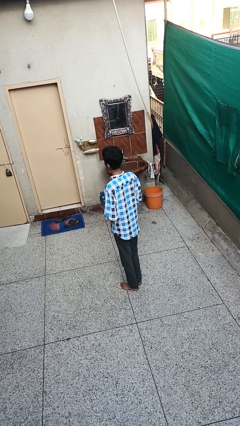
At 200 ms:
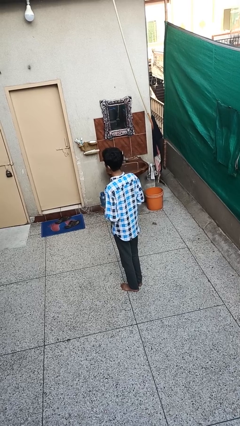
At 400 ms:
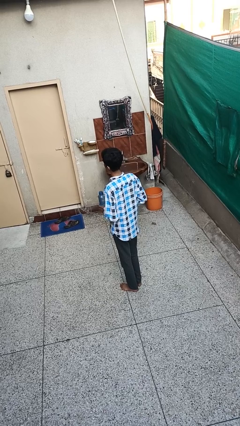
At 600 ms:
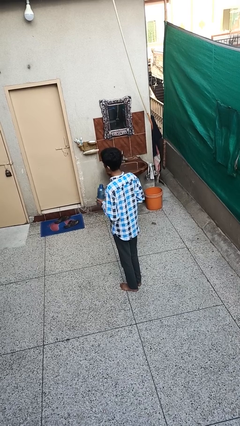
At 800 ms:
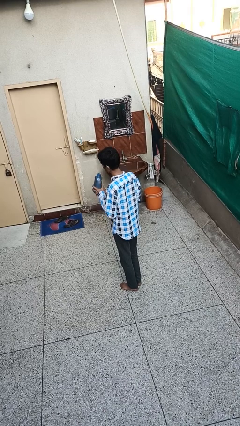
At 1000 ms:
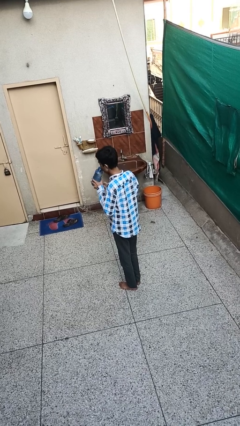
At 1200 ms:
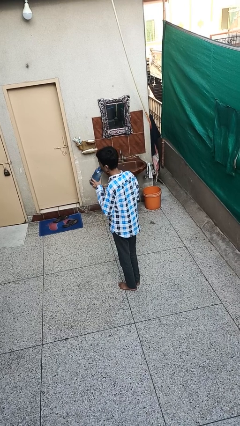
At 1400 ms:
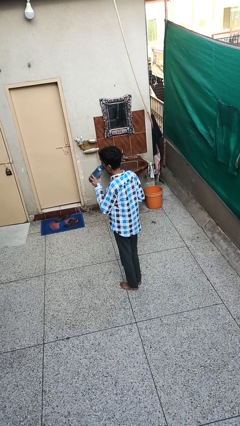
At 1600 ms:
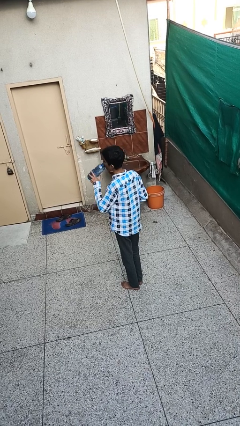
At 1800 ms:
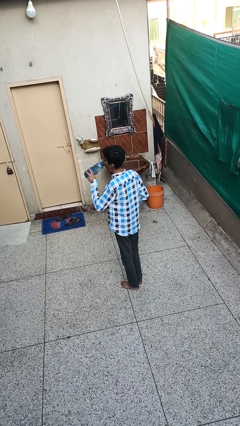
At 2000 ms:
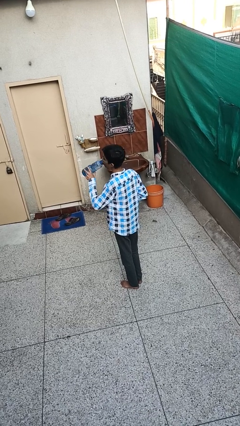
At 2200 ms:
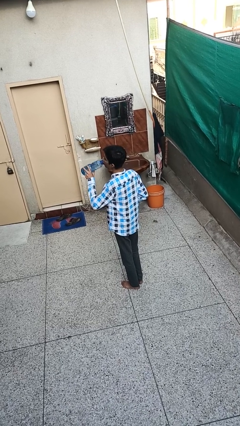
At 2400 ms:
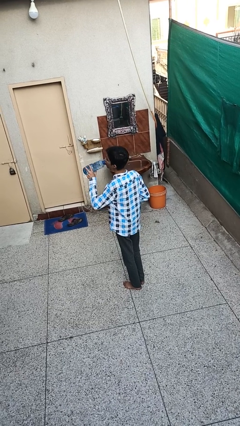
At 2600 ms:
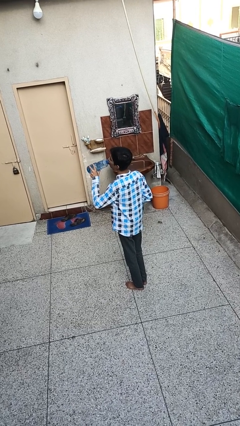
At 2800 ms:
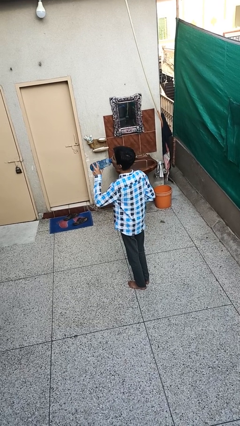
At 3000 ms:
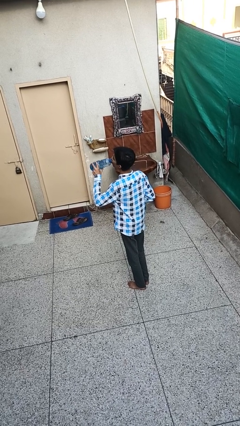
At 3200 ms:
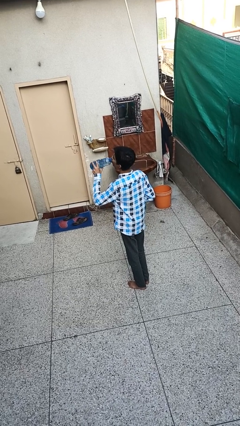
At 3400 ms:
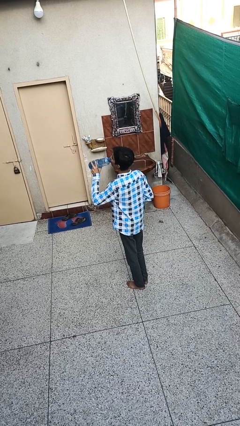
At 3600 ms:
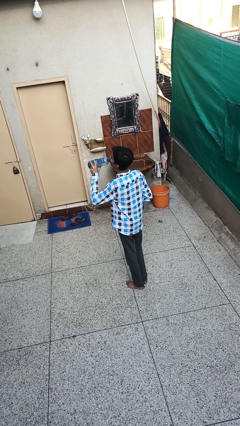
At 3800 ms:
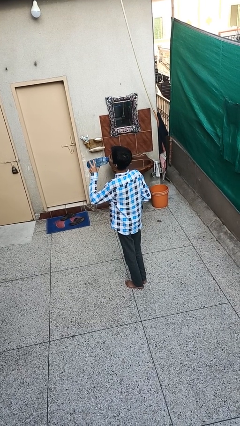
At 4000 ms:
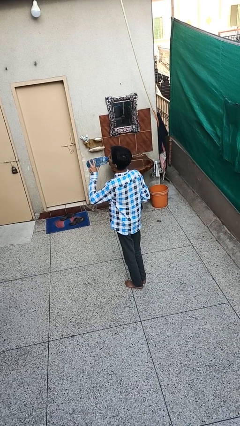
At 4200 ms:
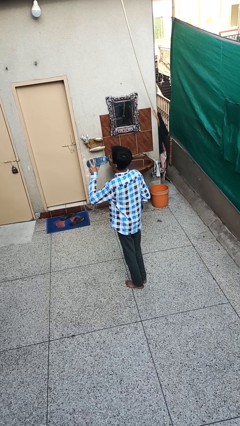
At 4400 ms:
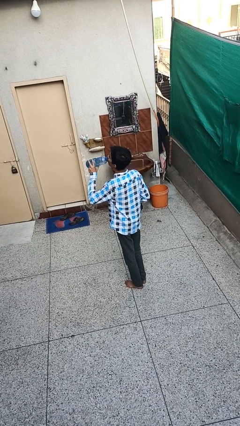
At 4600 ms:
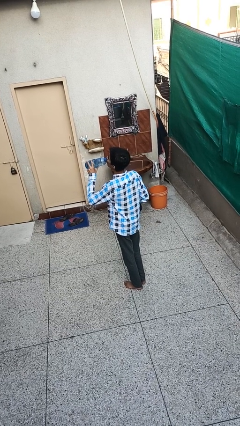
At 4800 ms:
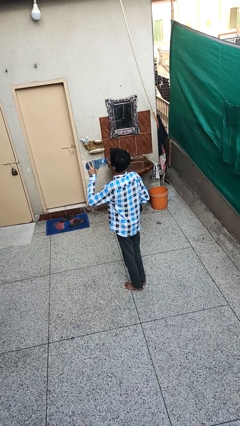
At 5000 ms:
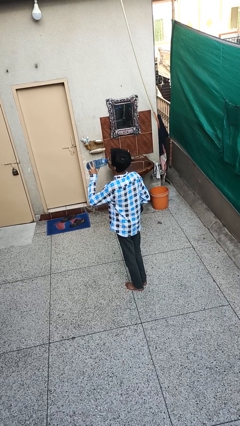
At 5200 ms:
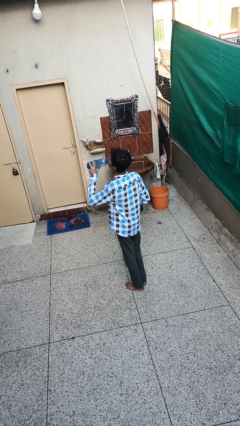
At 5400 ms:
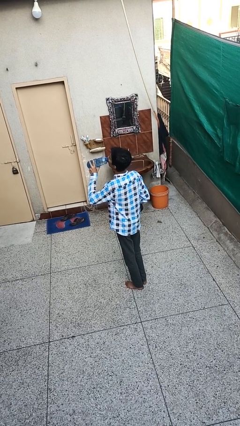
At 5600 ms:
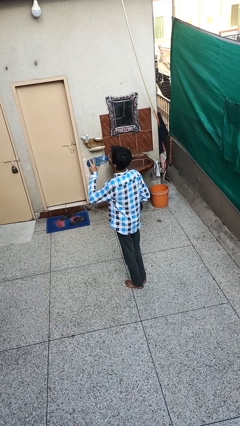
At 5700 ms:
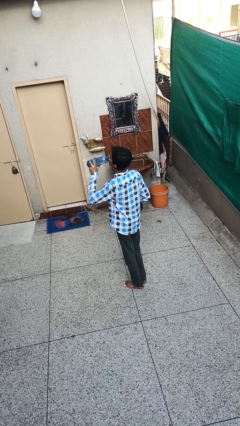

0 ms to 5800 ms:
person drinks from bottle

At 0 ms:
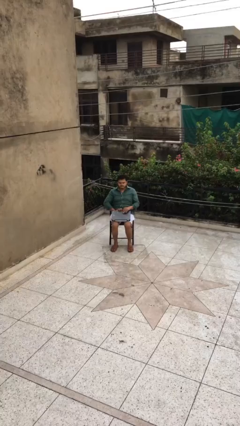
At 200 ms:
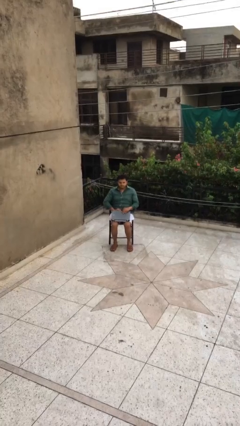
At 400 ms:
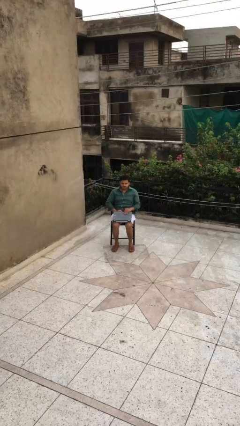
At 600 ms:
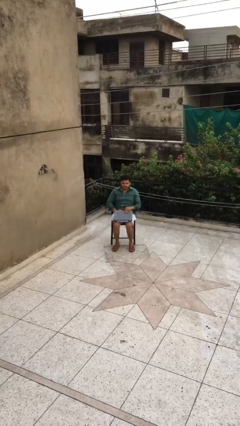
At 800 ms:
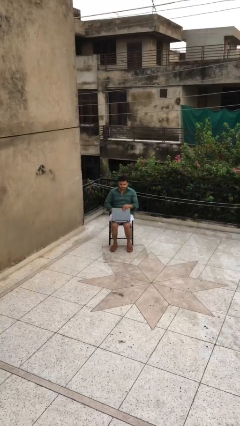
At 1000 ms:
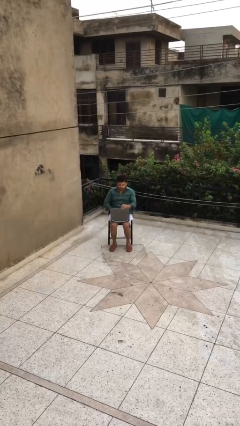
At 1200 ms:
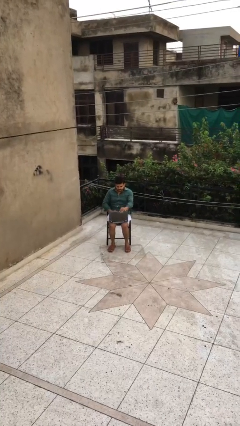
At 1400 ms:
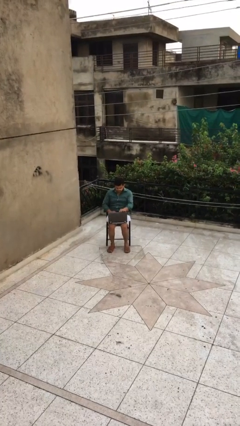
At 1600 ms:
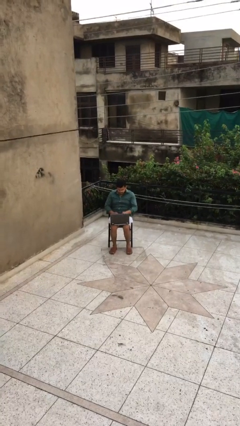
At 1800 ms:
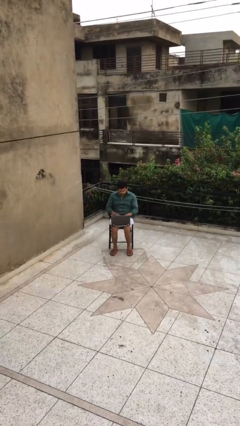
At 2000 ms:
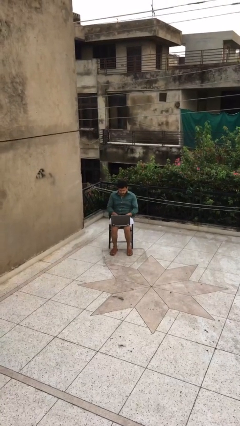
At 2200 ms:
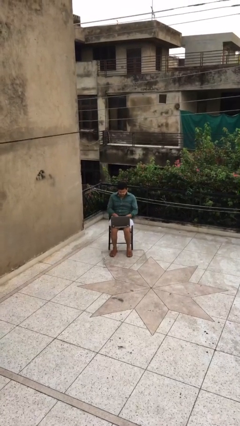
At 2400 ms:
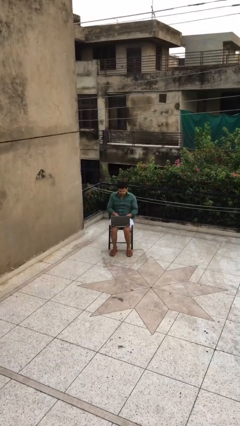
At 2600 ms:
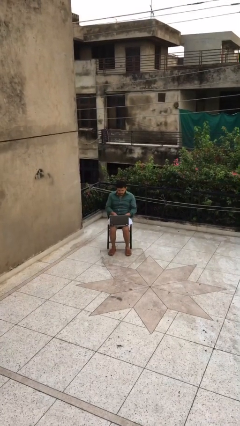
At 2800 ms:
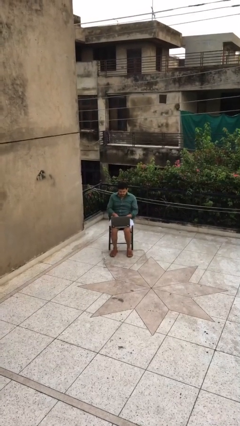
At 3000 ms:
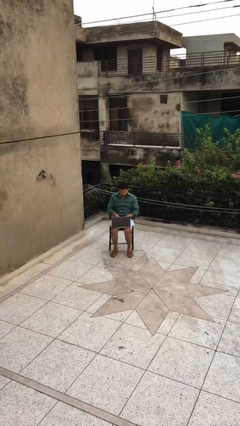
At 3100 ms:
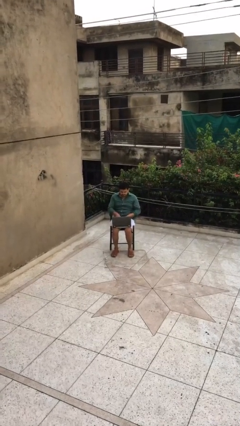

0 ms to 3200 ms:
person interacts with laptop

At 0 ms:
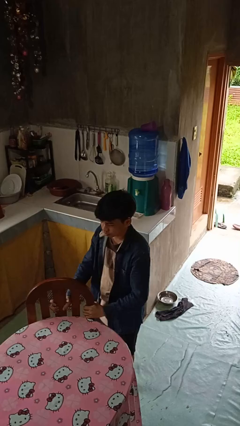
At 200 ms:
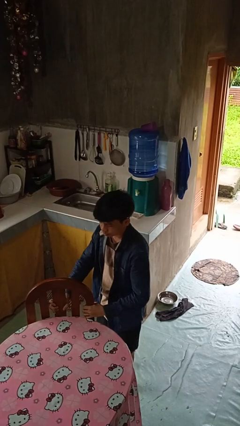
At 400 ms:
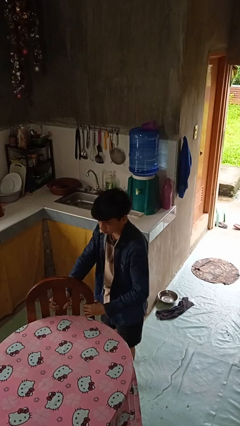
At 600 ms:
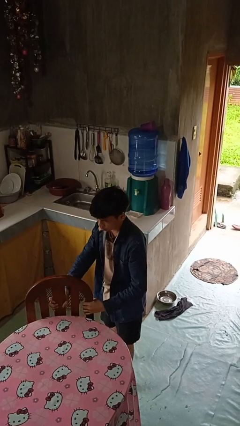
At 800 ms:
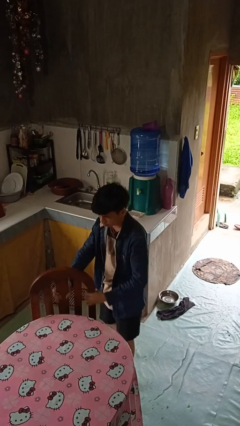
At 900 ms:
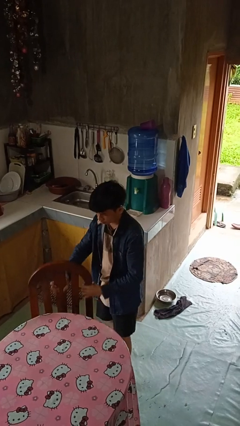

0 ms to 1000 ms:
person pulls out chair

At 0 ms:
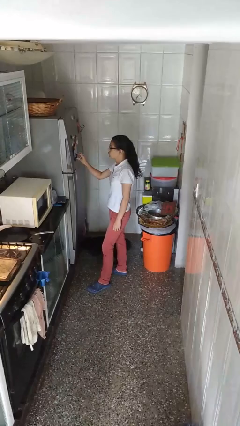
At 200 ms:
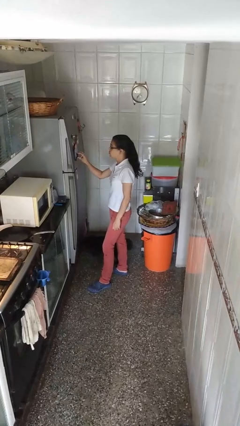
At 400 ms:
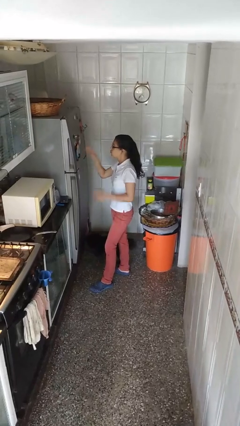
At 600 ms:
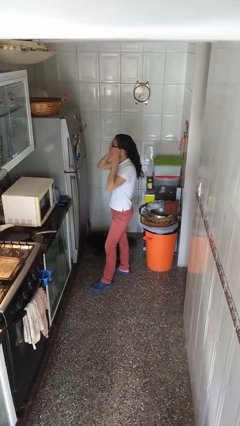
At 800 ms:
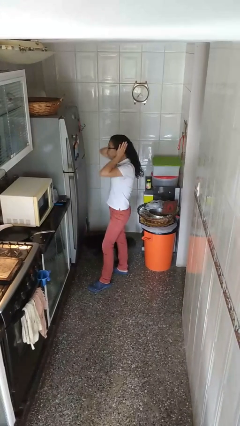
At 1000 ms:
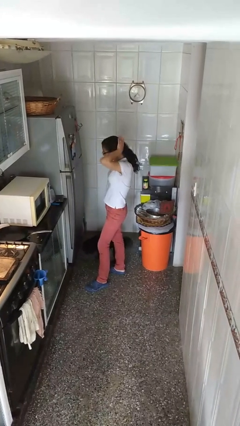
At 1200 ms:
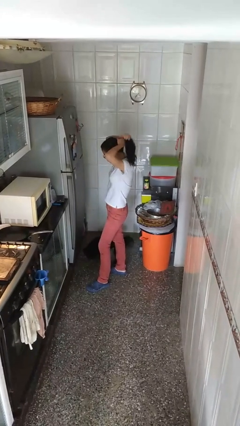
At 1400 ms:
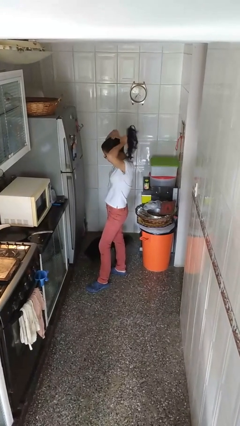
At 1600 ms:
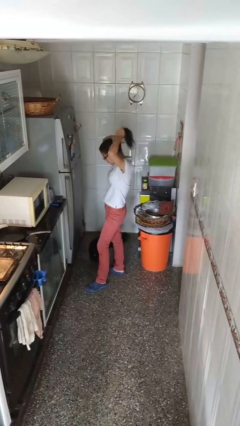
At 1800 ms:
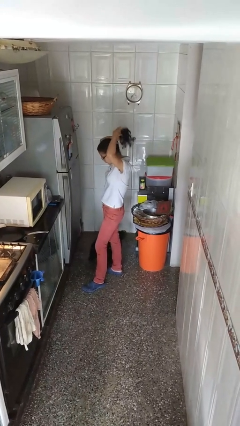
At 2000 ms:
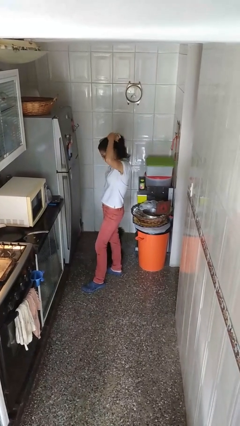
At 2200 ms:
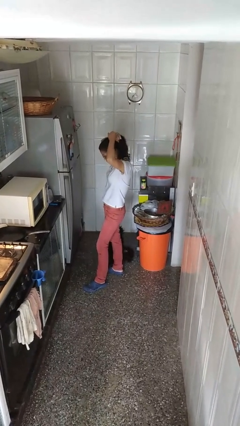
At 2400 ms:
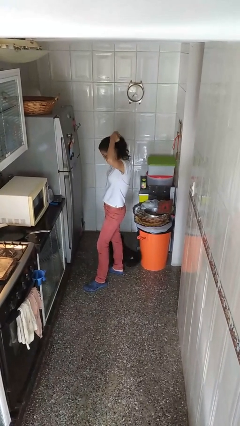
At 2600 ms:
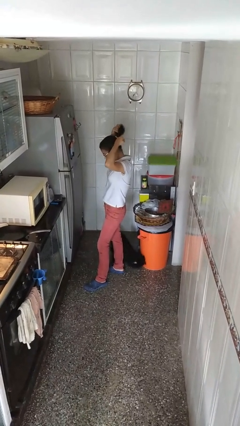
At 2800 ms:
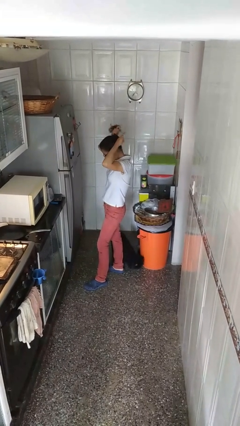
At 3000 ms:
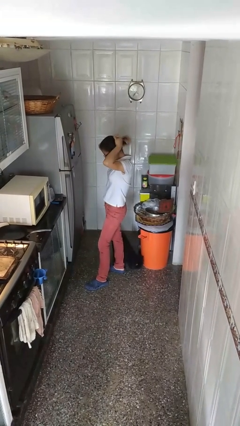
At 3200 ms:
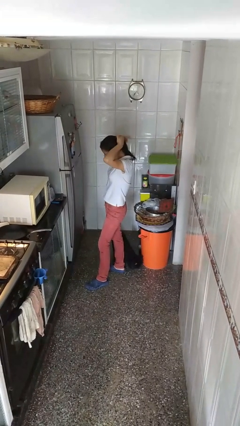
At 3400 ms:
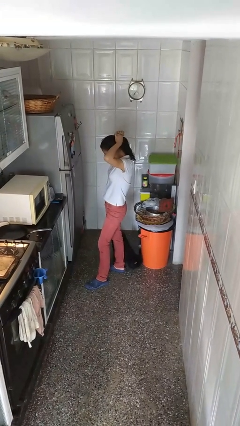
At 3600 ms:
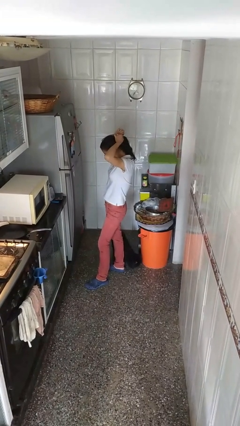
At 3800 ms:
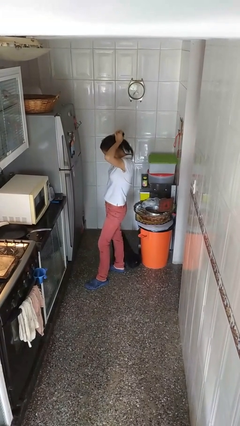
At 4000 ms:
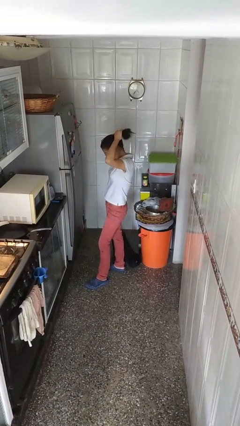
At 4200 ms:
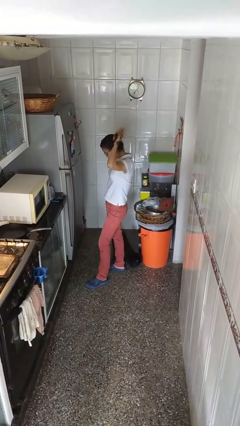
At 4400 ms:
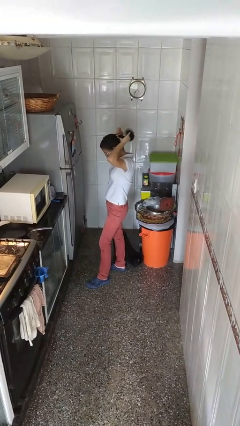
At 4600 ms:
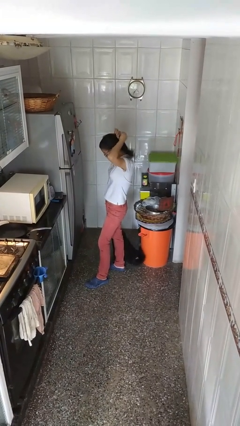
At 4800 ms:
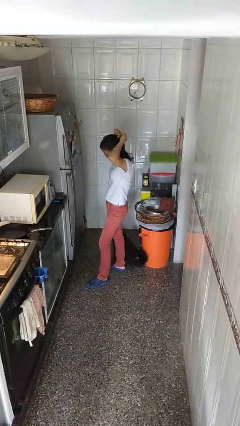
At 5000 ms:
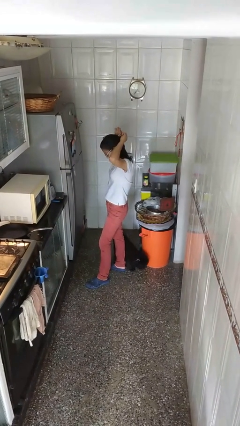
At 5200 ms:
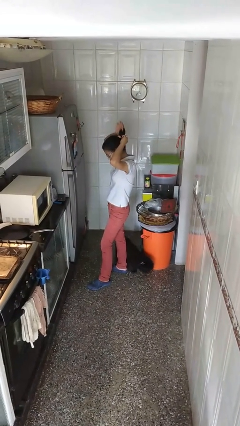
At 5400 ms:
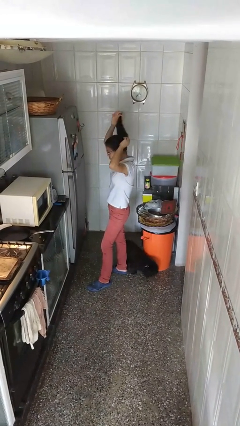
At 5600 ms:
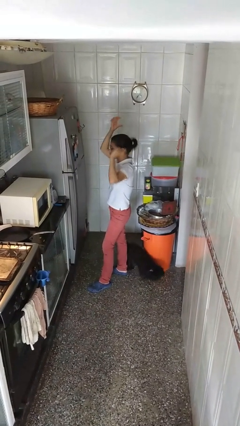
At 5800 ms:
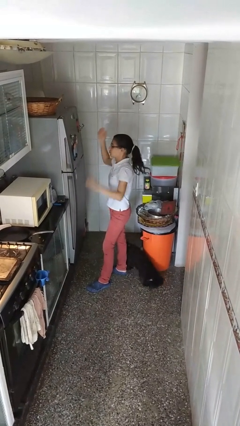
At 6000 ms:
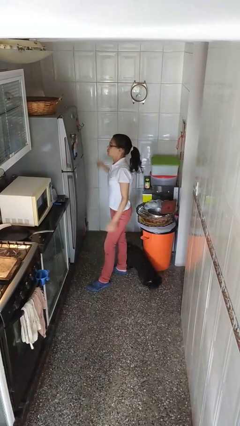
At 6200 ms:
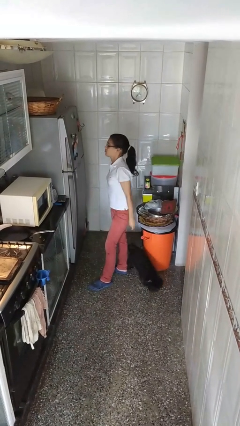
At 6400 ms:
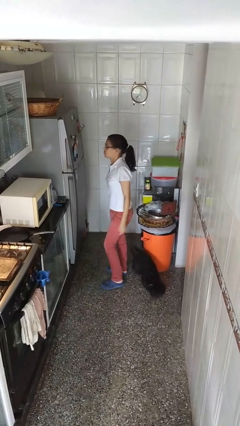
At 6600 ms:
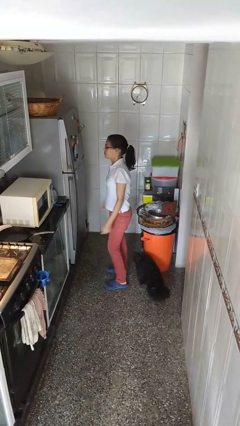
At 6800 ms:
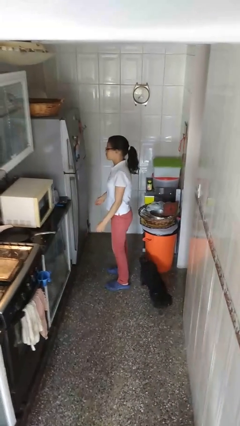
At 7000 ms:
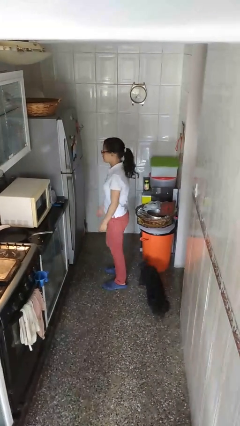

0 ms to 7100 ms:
person puts hair in ponytail

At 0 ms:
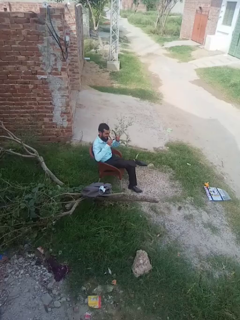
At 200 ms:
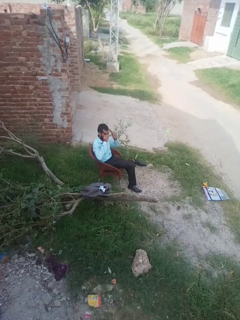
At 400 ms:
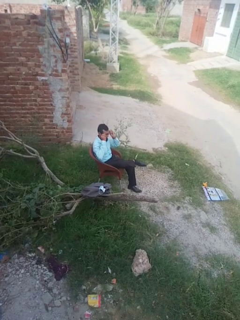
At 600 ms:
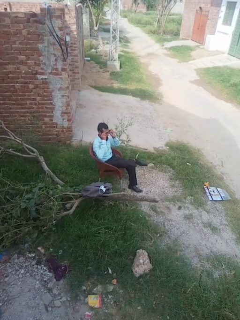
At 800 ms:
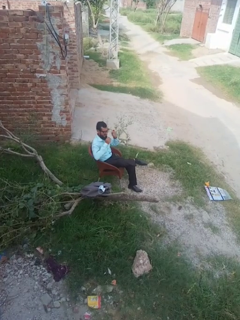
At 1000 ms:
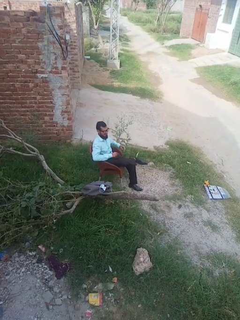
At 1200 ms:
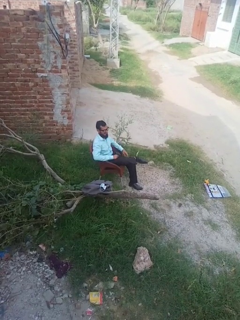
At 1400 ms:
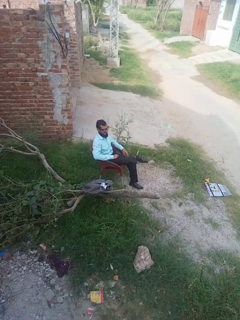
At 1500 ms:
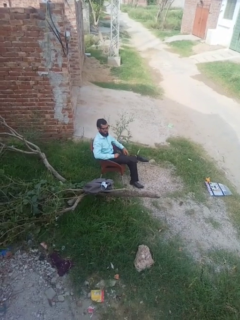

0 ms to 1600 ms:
person puts on glasses
